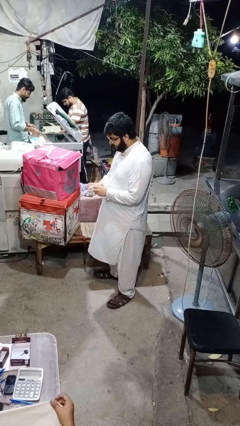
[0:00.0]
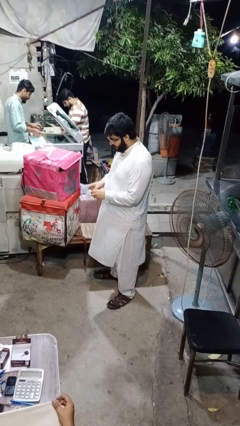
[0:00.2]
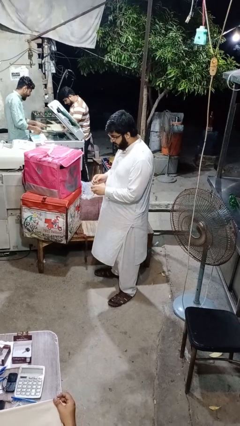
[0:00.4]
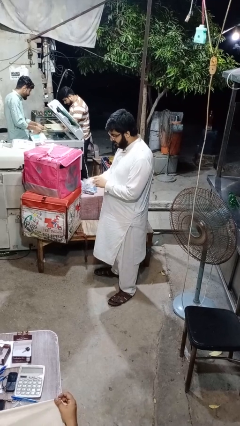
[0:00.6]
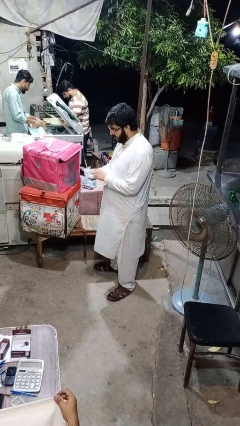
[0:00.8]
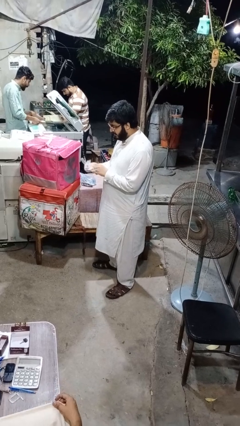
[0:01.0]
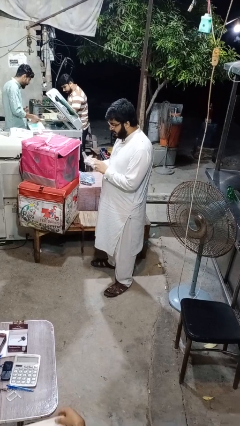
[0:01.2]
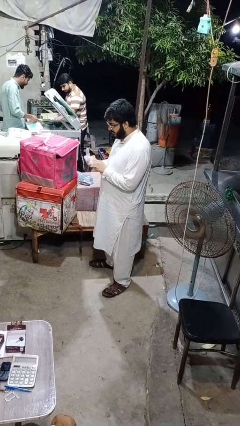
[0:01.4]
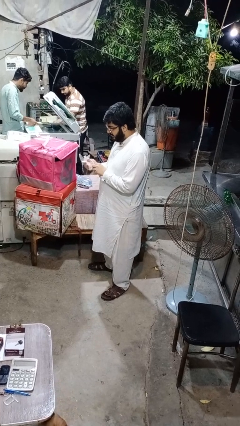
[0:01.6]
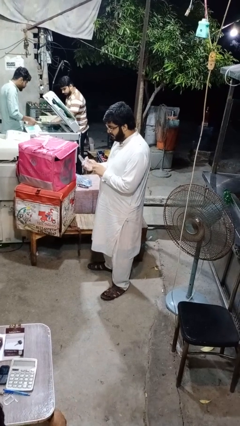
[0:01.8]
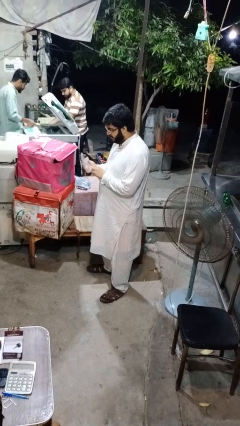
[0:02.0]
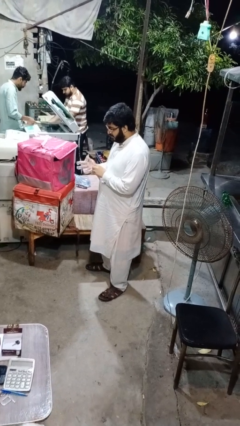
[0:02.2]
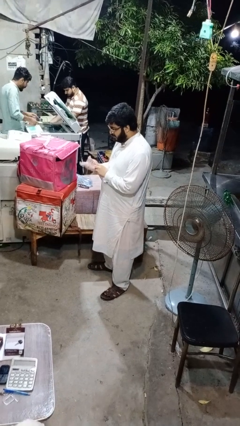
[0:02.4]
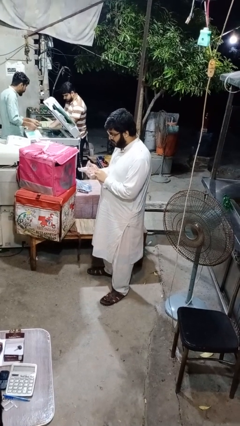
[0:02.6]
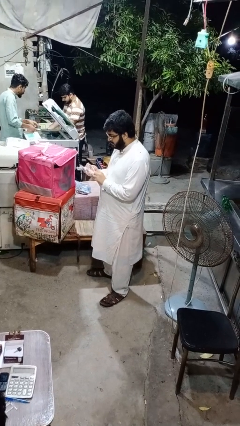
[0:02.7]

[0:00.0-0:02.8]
person puts on gloves

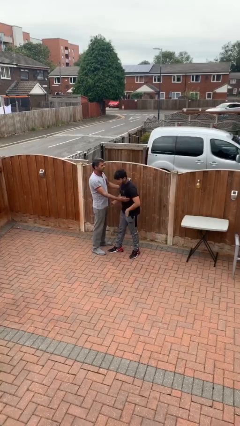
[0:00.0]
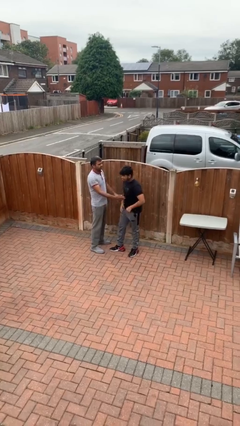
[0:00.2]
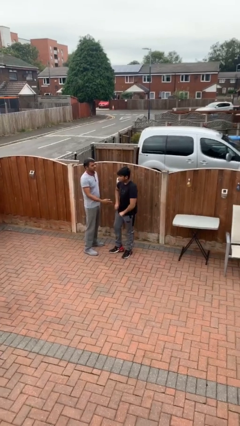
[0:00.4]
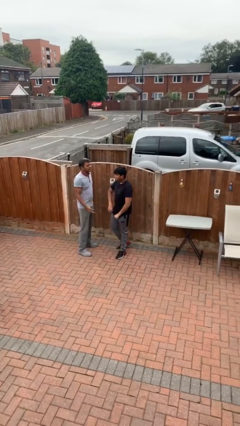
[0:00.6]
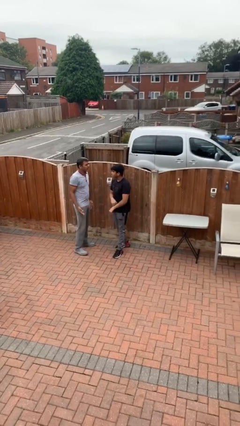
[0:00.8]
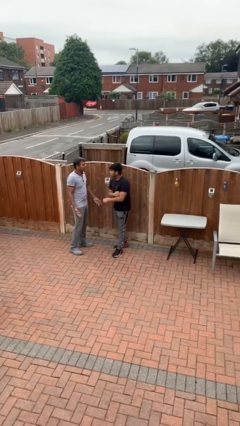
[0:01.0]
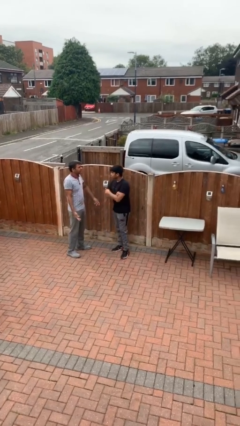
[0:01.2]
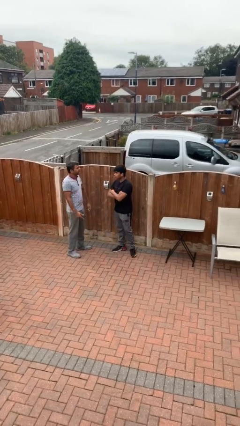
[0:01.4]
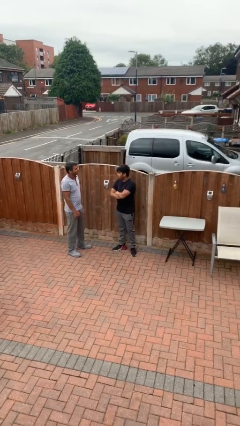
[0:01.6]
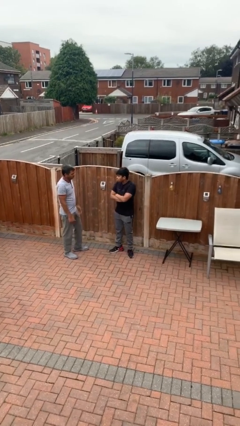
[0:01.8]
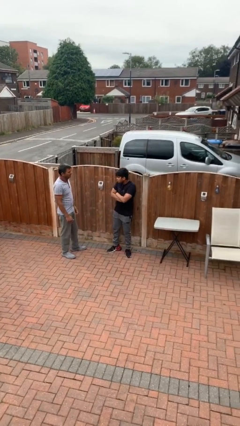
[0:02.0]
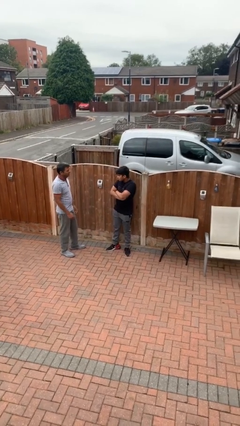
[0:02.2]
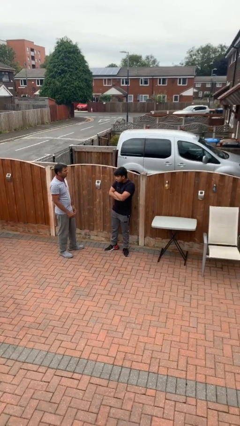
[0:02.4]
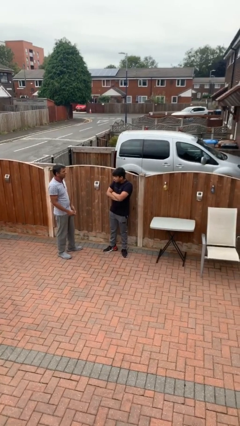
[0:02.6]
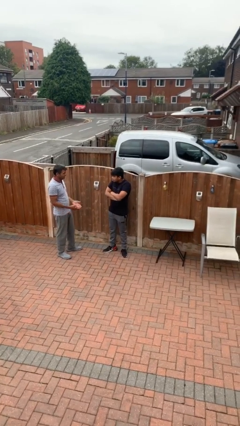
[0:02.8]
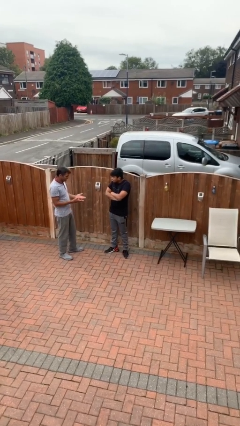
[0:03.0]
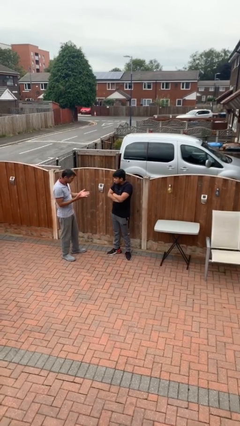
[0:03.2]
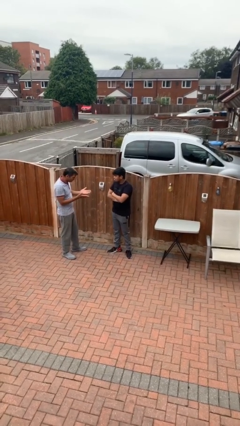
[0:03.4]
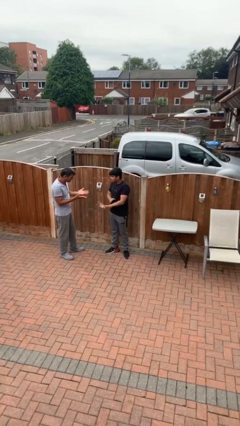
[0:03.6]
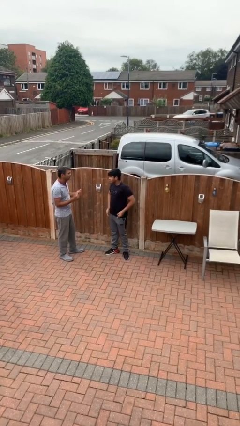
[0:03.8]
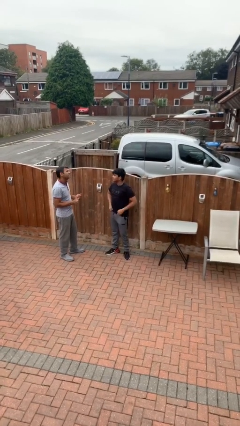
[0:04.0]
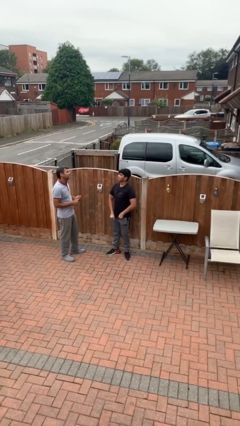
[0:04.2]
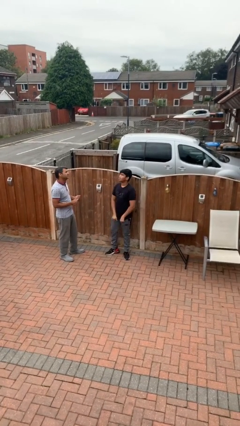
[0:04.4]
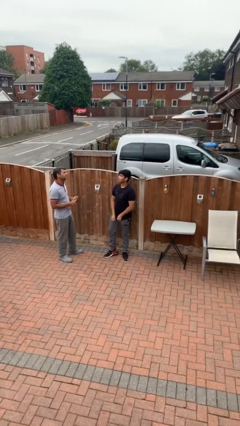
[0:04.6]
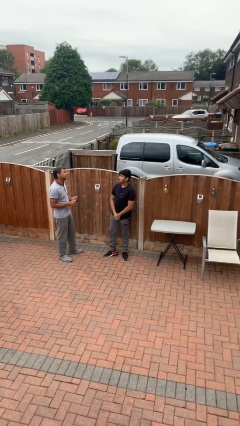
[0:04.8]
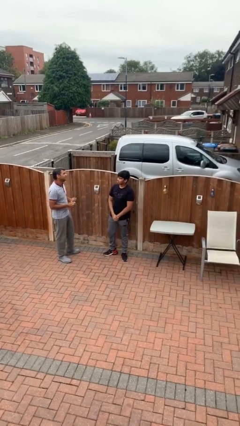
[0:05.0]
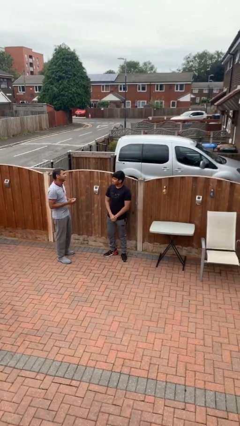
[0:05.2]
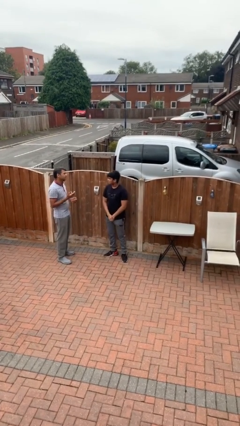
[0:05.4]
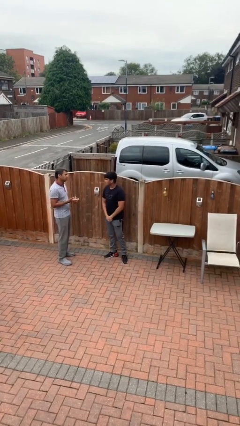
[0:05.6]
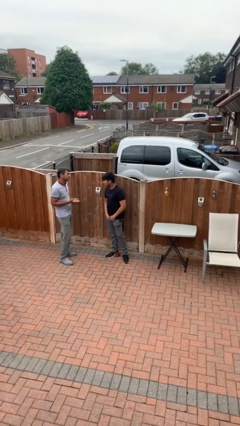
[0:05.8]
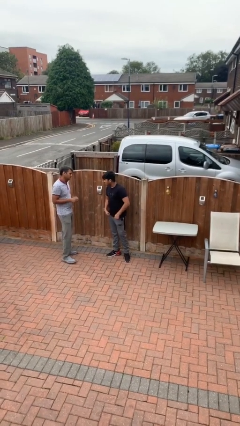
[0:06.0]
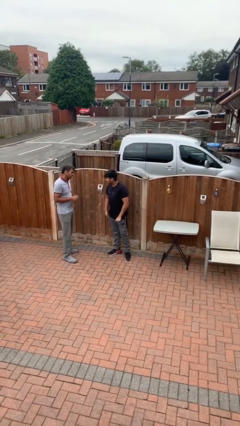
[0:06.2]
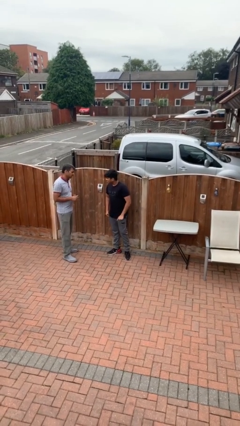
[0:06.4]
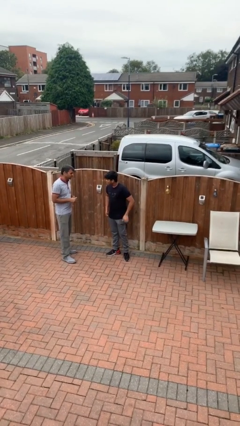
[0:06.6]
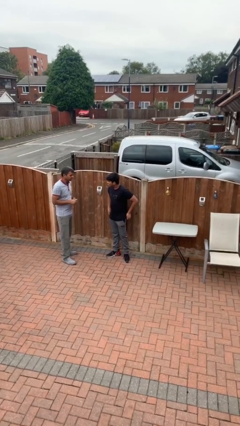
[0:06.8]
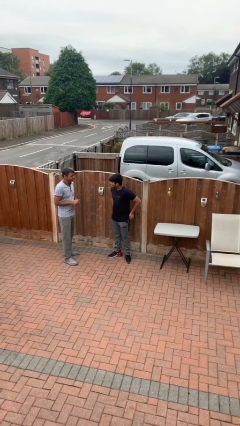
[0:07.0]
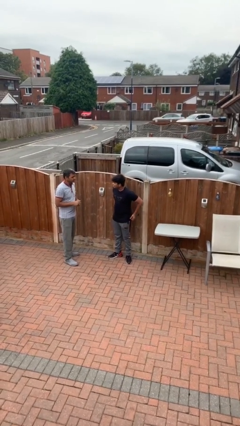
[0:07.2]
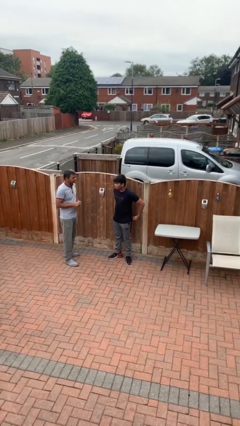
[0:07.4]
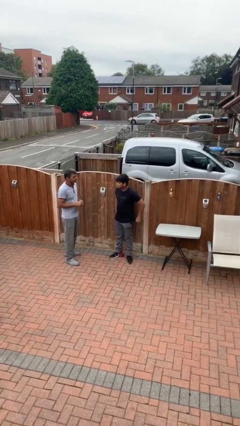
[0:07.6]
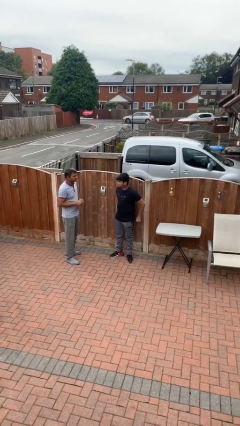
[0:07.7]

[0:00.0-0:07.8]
person talks to person

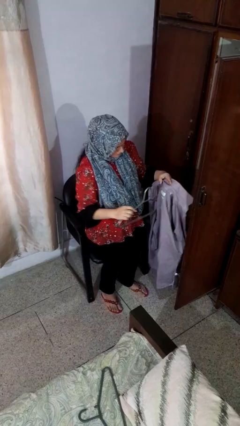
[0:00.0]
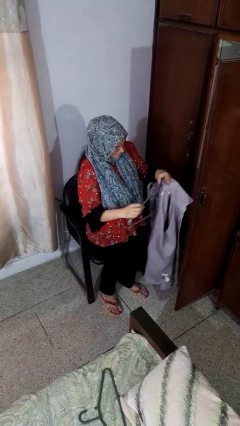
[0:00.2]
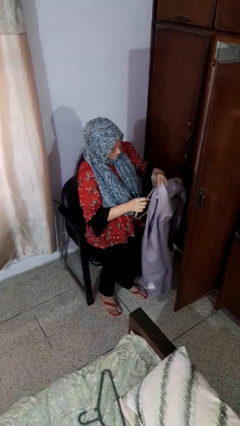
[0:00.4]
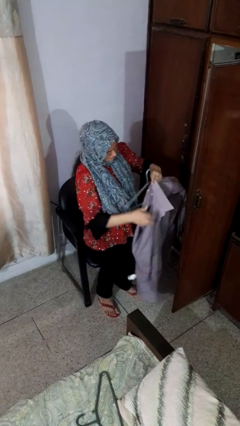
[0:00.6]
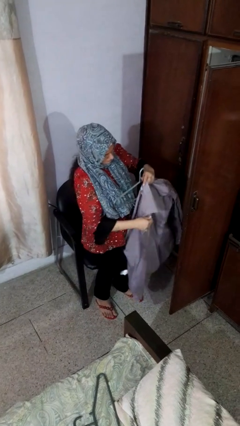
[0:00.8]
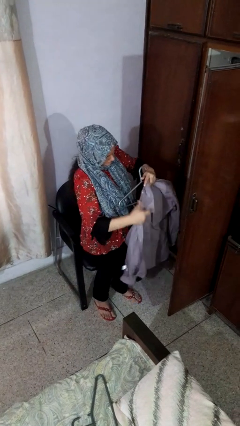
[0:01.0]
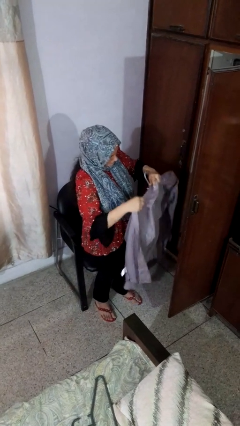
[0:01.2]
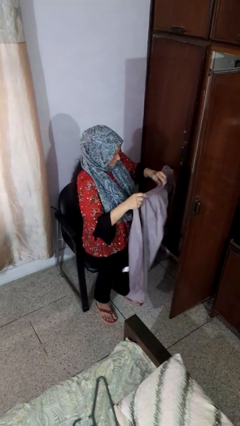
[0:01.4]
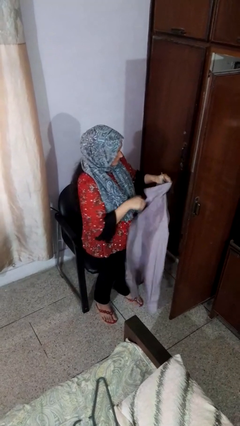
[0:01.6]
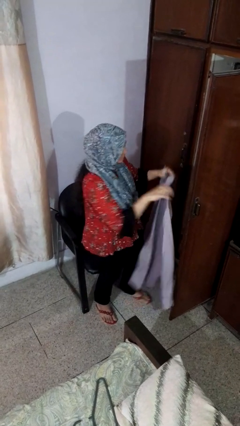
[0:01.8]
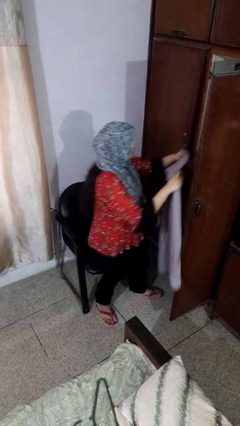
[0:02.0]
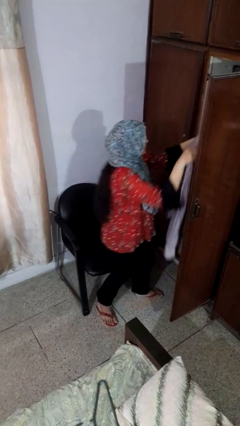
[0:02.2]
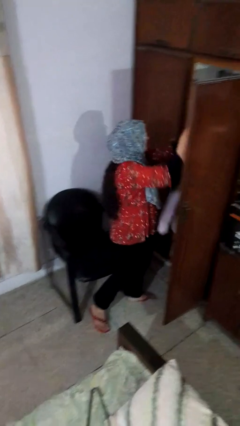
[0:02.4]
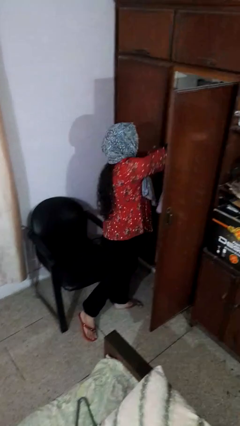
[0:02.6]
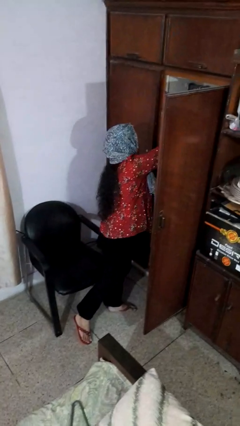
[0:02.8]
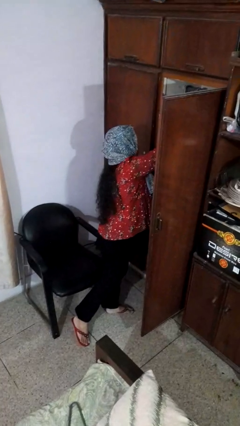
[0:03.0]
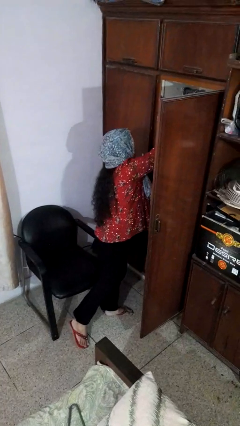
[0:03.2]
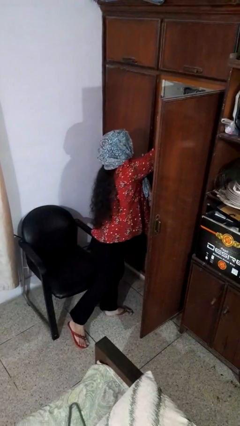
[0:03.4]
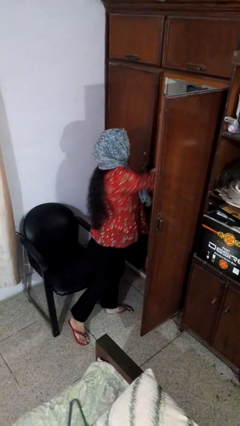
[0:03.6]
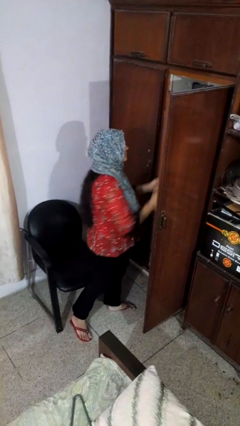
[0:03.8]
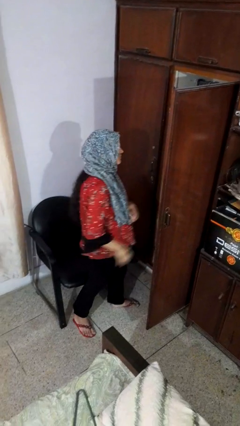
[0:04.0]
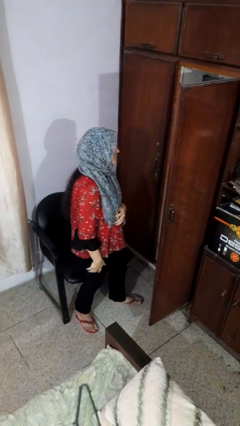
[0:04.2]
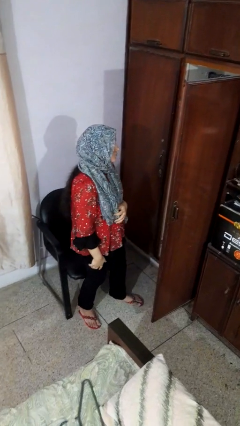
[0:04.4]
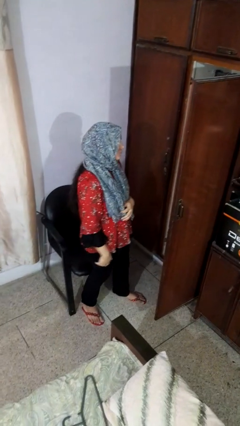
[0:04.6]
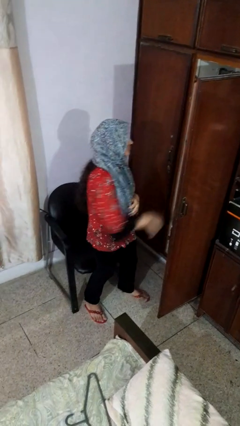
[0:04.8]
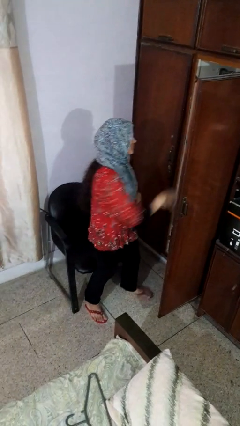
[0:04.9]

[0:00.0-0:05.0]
person puts clothes into closet

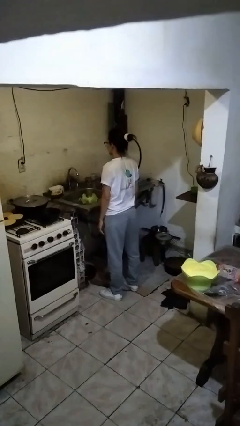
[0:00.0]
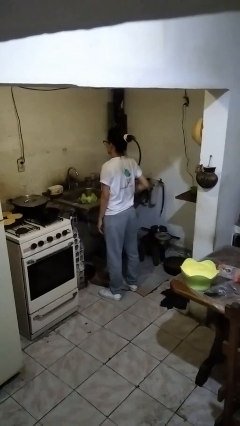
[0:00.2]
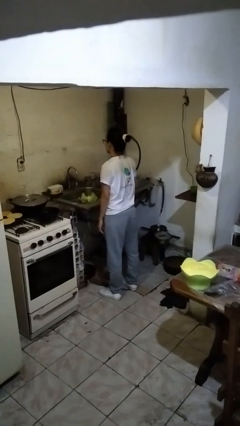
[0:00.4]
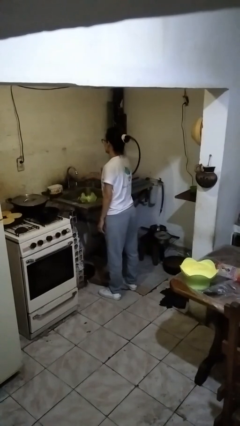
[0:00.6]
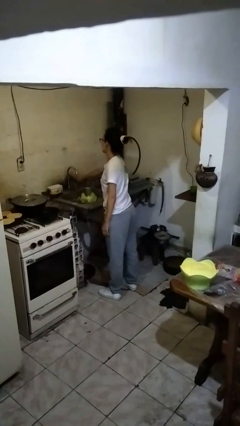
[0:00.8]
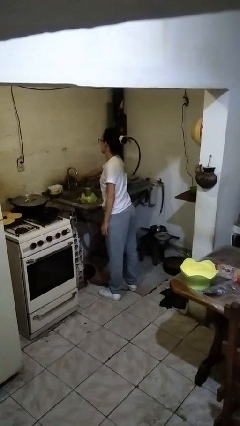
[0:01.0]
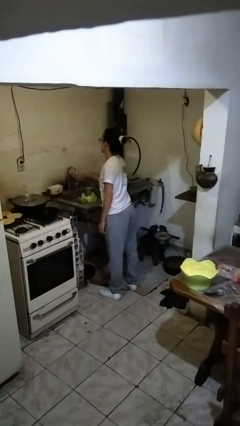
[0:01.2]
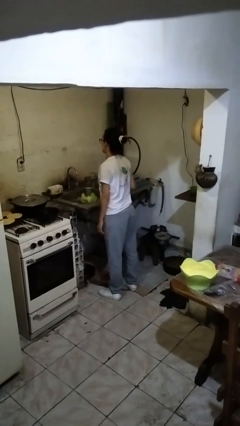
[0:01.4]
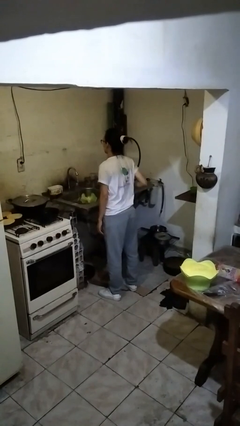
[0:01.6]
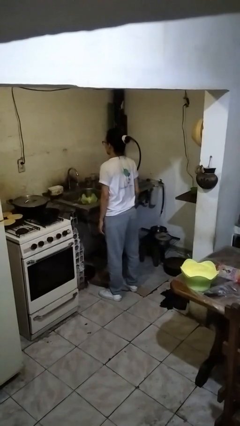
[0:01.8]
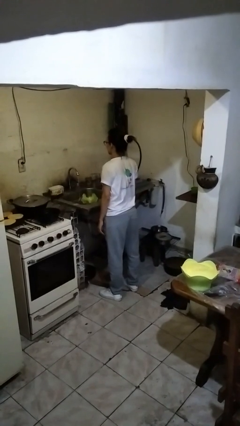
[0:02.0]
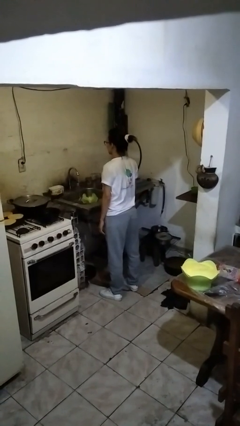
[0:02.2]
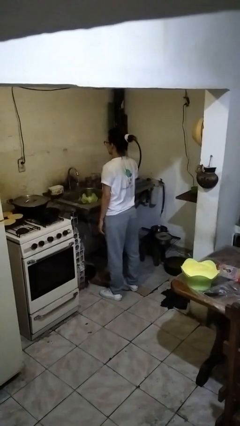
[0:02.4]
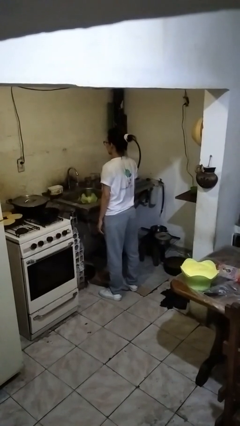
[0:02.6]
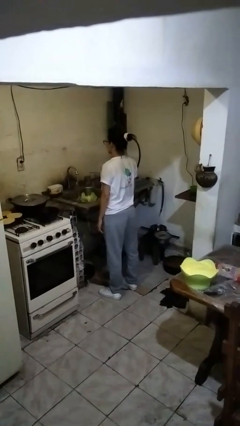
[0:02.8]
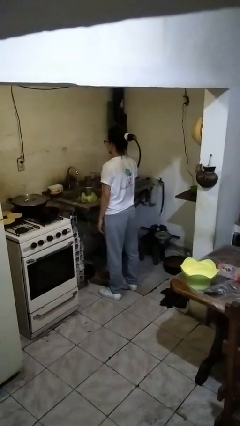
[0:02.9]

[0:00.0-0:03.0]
person turns on faucet
